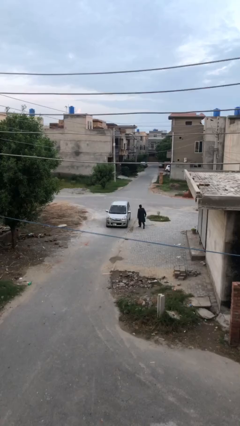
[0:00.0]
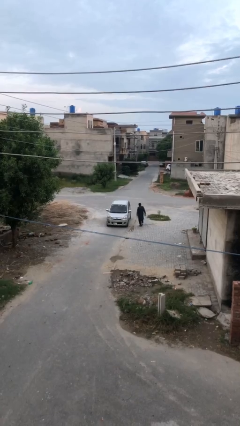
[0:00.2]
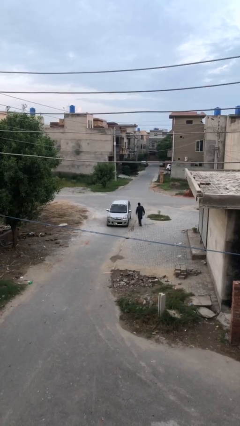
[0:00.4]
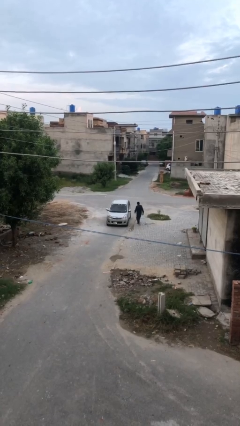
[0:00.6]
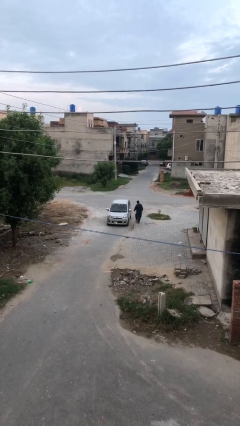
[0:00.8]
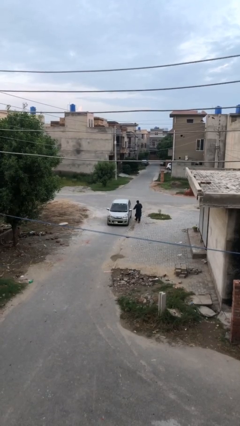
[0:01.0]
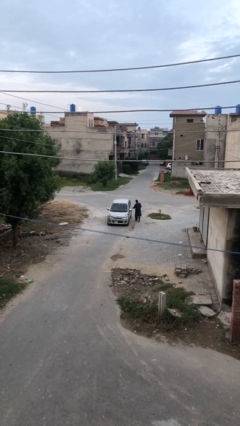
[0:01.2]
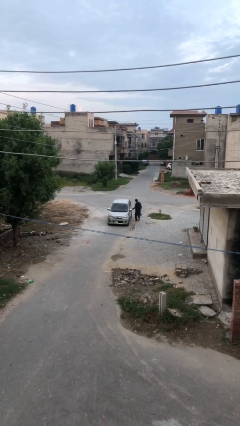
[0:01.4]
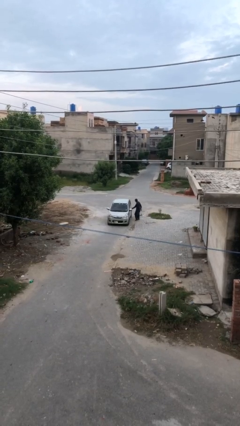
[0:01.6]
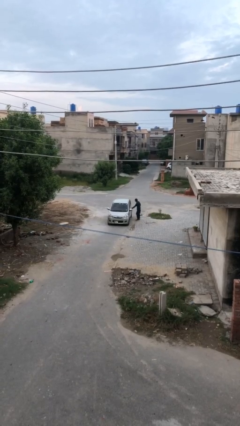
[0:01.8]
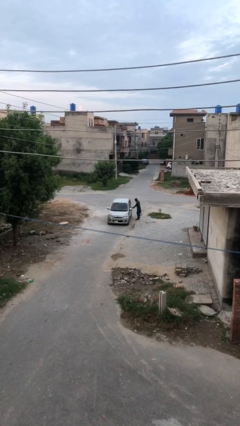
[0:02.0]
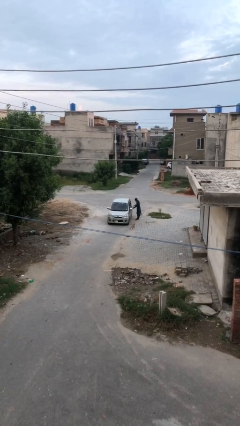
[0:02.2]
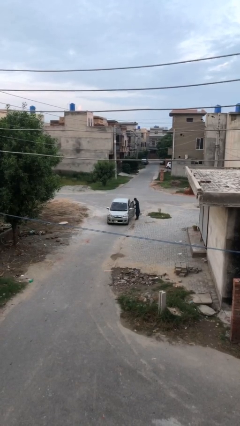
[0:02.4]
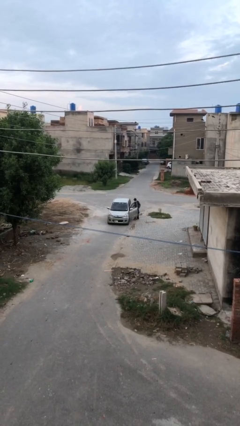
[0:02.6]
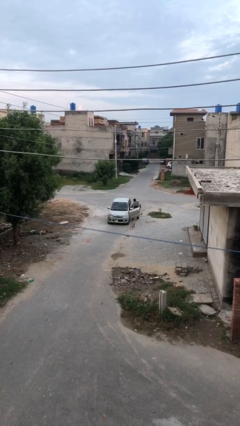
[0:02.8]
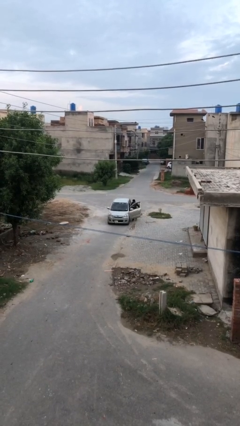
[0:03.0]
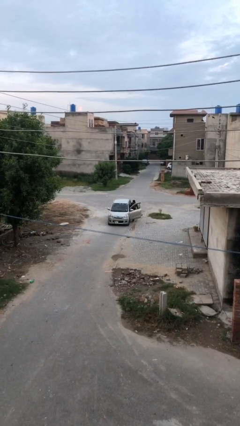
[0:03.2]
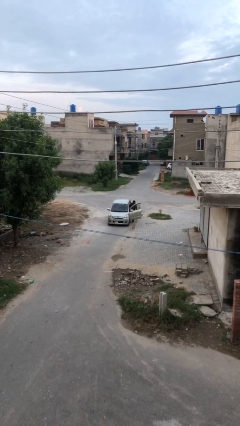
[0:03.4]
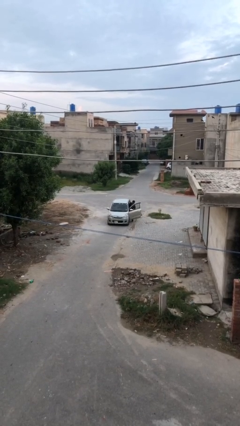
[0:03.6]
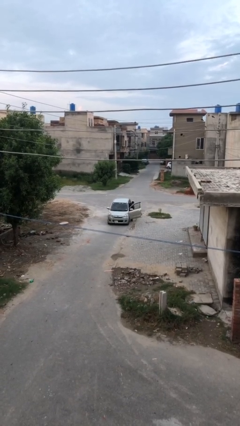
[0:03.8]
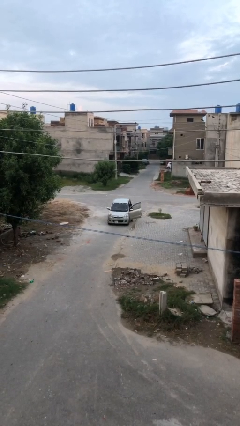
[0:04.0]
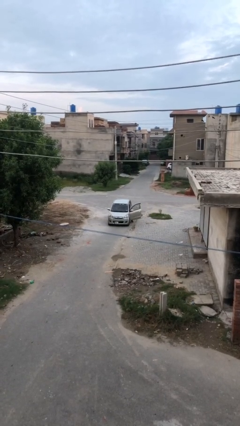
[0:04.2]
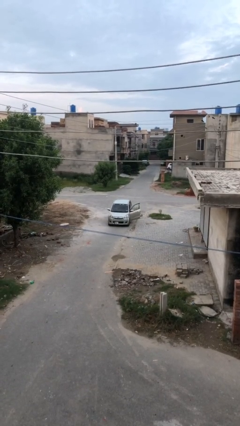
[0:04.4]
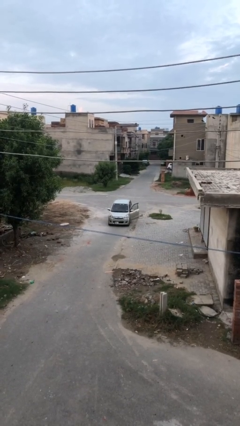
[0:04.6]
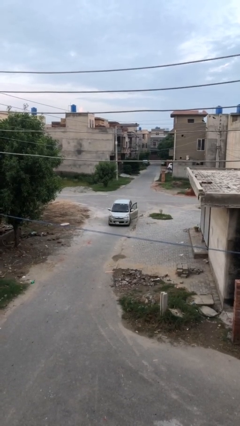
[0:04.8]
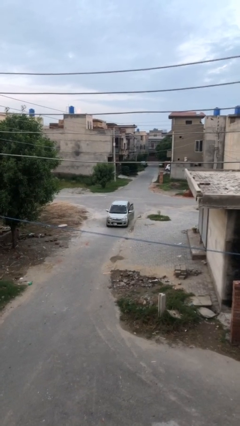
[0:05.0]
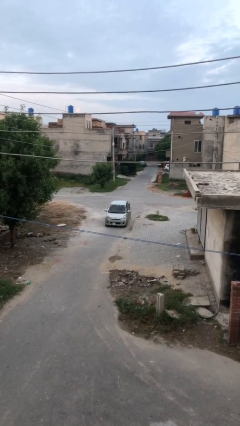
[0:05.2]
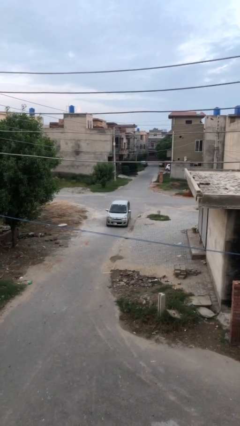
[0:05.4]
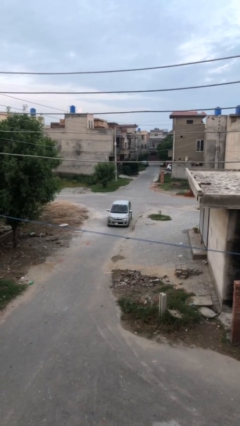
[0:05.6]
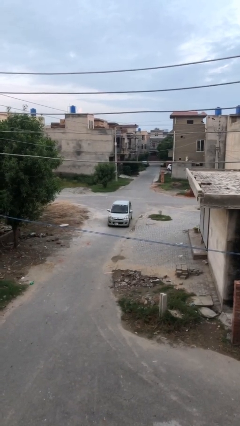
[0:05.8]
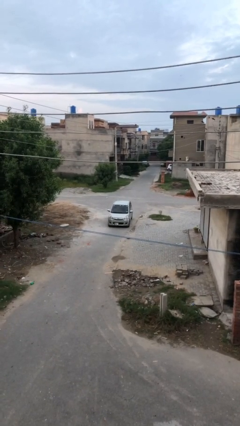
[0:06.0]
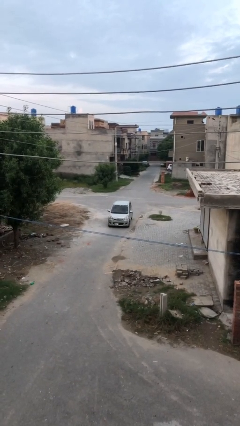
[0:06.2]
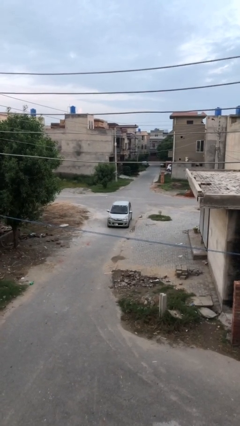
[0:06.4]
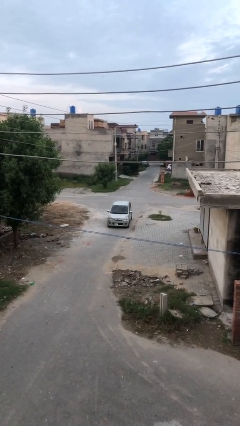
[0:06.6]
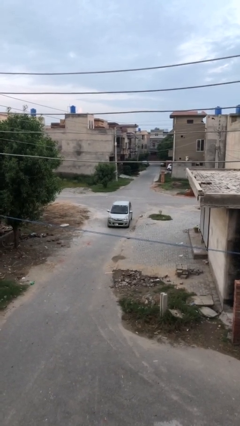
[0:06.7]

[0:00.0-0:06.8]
car picks up person

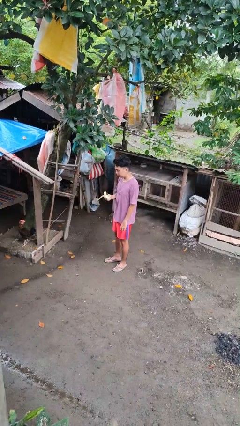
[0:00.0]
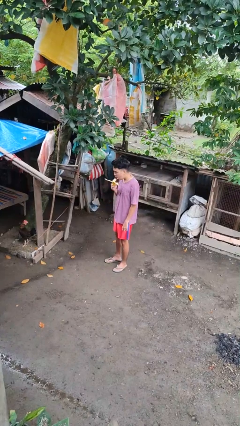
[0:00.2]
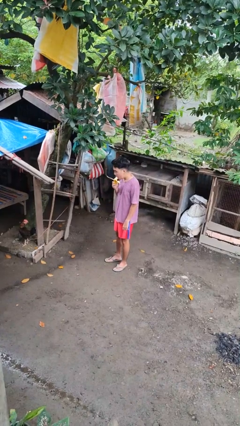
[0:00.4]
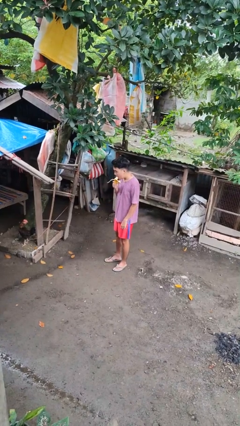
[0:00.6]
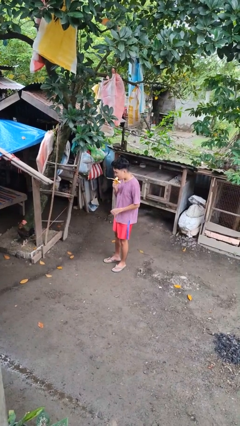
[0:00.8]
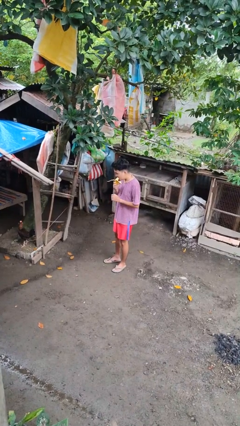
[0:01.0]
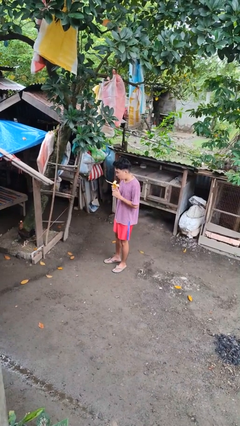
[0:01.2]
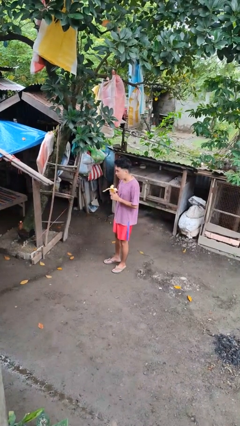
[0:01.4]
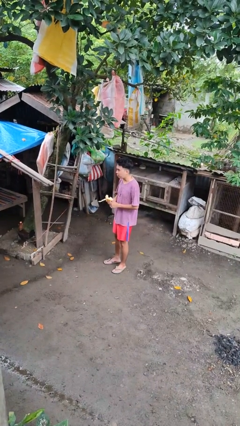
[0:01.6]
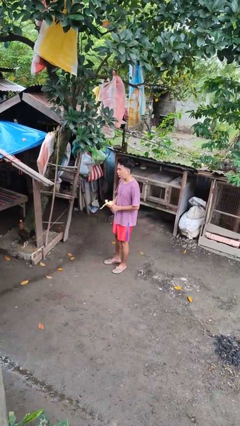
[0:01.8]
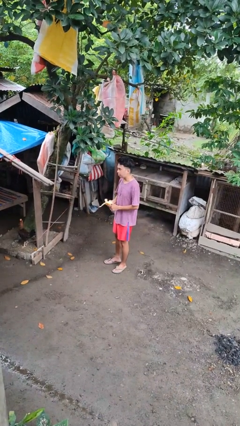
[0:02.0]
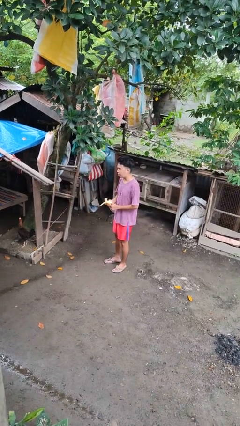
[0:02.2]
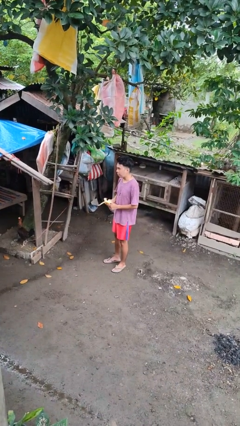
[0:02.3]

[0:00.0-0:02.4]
person eats banana

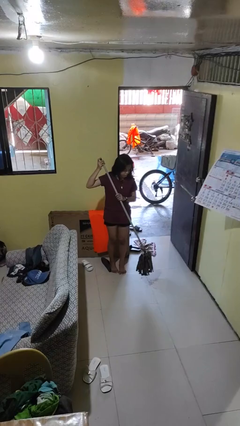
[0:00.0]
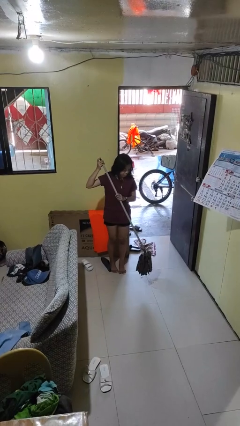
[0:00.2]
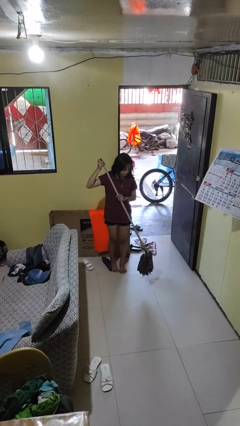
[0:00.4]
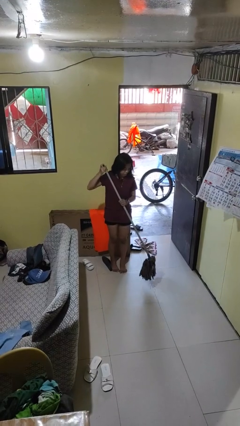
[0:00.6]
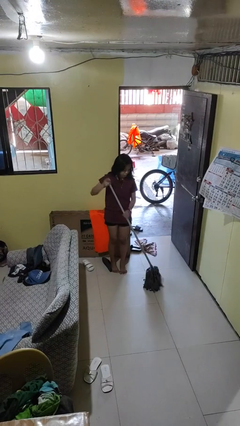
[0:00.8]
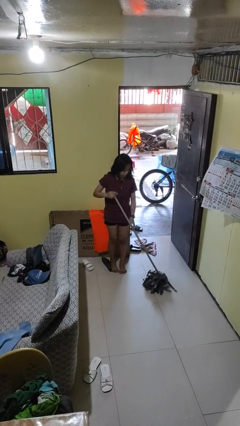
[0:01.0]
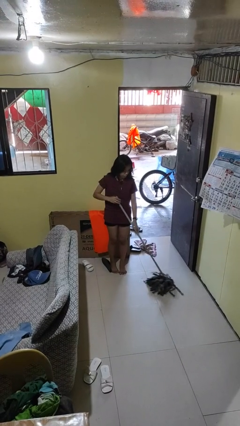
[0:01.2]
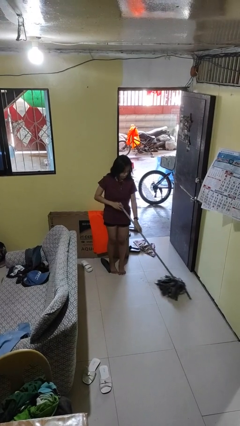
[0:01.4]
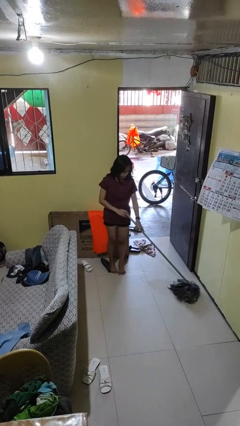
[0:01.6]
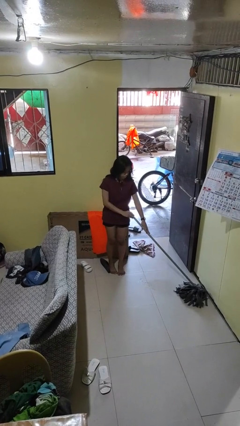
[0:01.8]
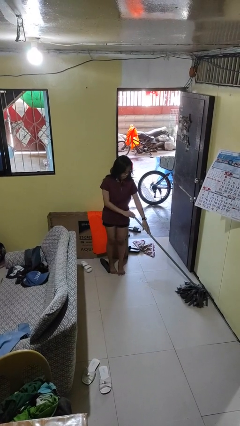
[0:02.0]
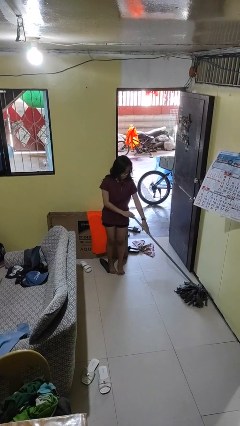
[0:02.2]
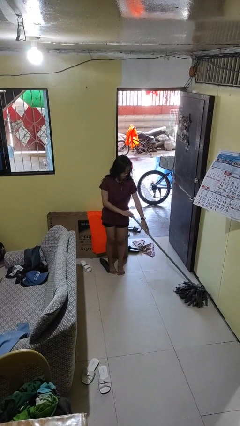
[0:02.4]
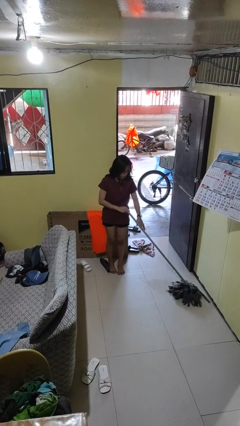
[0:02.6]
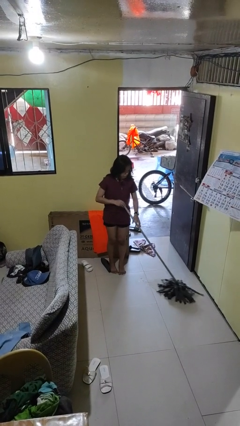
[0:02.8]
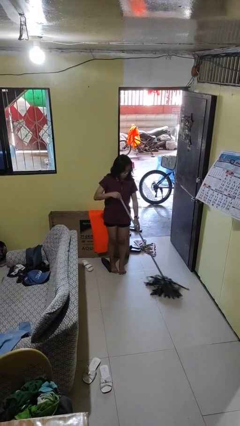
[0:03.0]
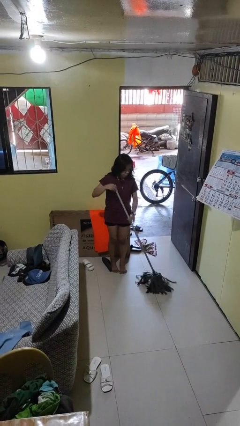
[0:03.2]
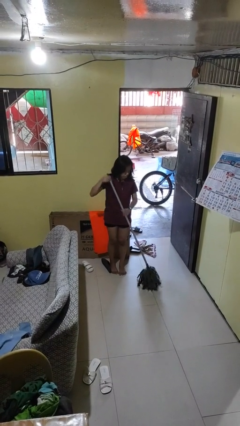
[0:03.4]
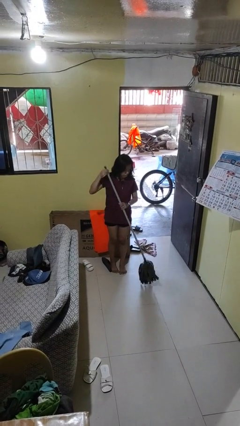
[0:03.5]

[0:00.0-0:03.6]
person mops

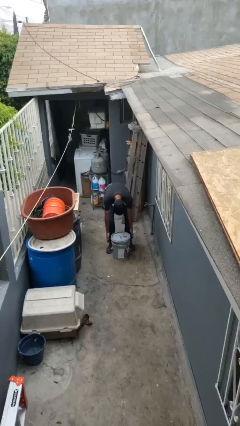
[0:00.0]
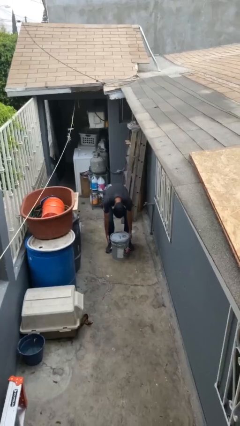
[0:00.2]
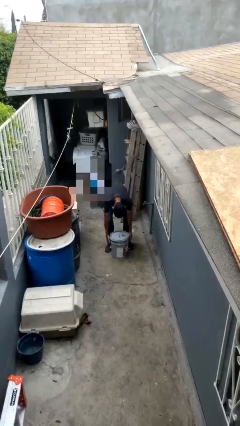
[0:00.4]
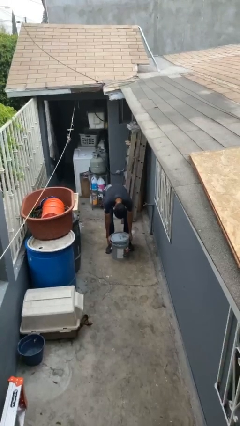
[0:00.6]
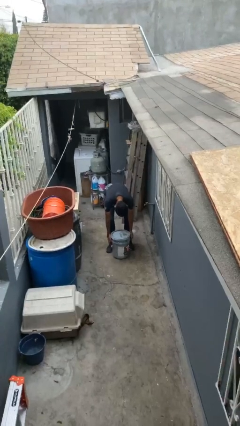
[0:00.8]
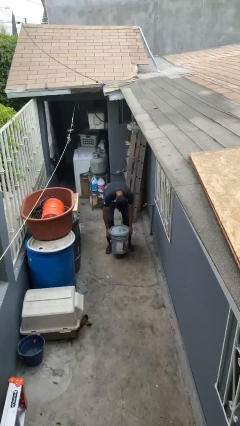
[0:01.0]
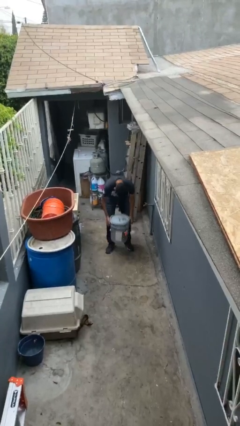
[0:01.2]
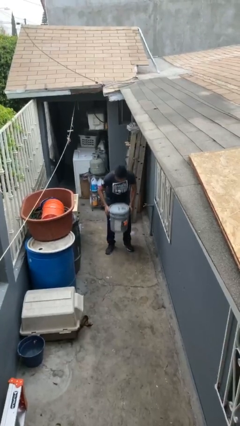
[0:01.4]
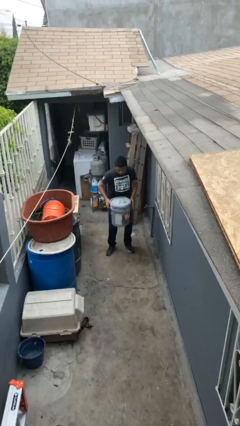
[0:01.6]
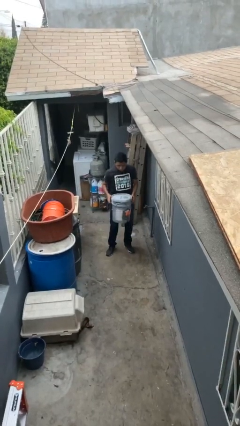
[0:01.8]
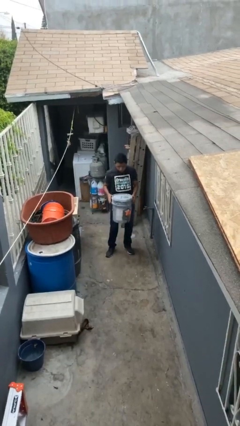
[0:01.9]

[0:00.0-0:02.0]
person picks up object from floor

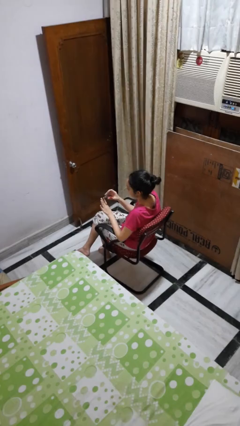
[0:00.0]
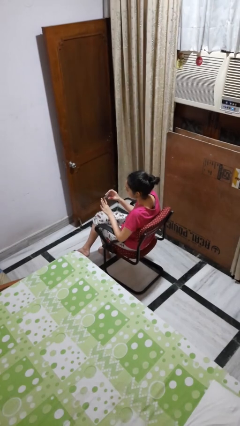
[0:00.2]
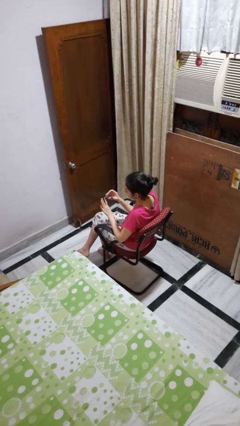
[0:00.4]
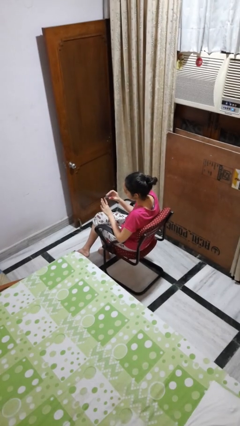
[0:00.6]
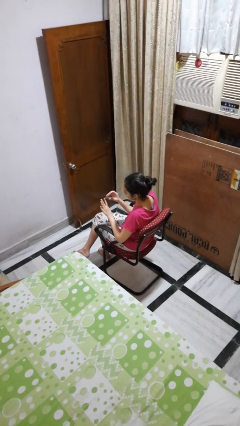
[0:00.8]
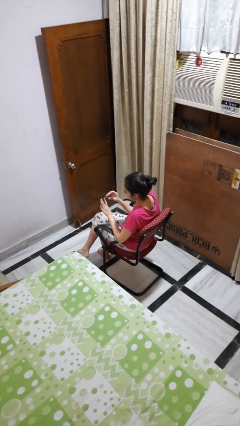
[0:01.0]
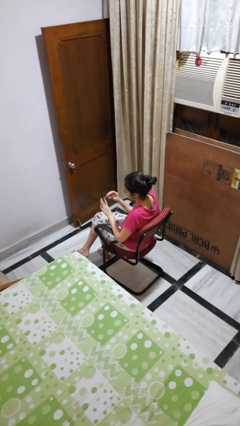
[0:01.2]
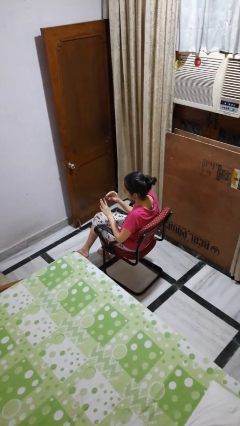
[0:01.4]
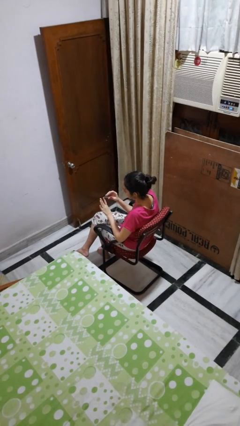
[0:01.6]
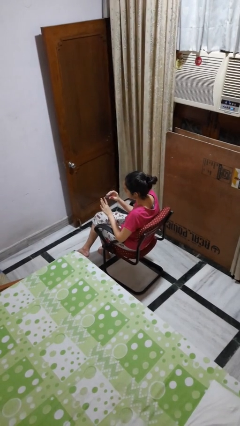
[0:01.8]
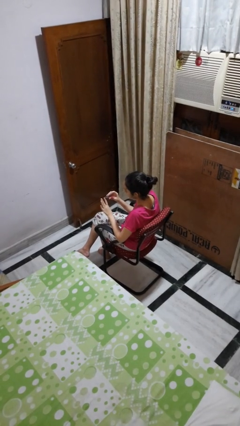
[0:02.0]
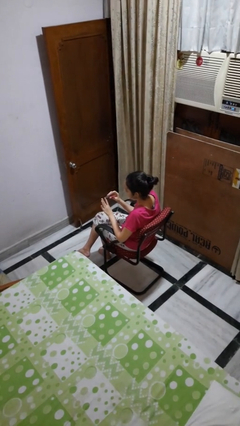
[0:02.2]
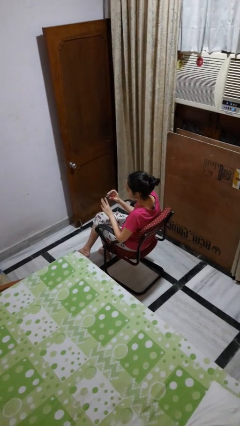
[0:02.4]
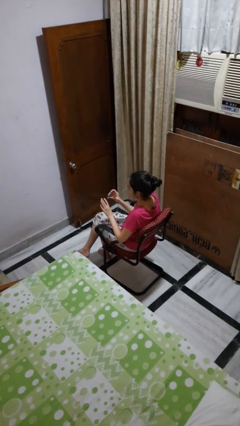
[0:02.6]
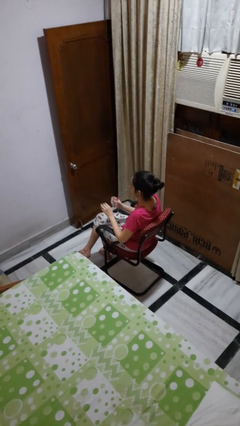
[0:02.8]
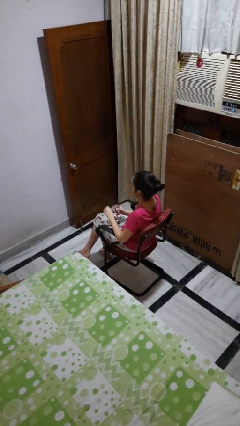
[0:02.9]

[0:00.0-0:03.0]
person clips fingernails
